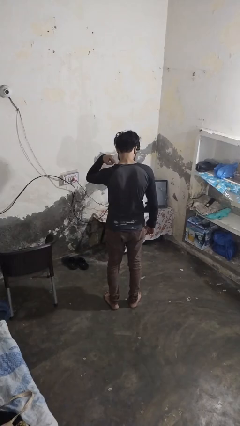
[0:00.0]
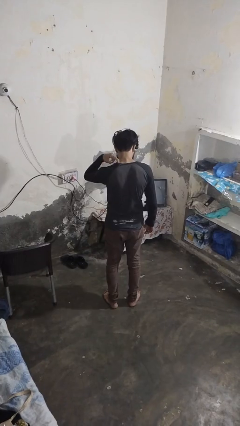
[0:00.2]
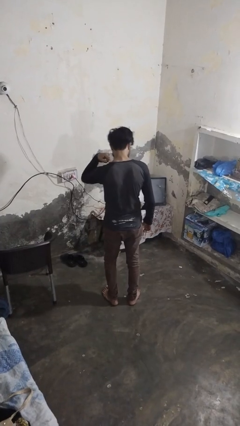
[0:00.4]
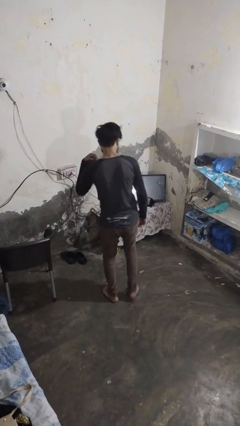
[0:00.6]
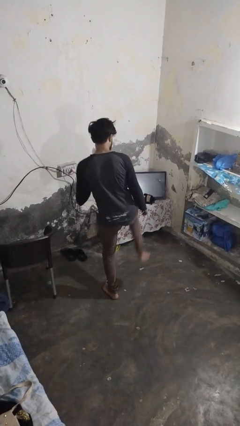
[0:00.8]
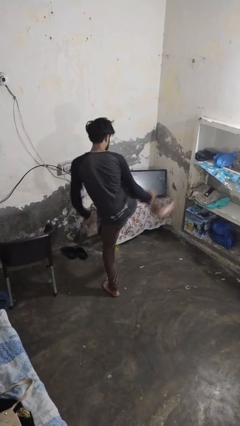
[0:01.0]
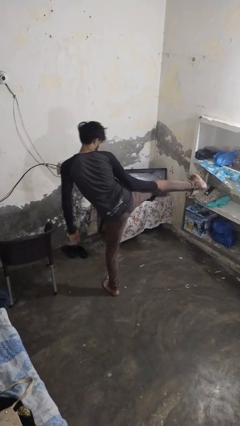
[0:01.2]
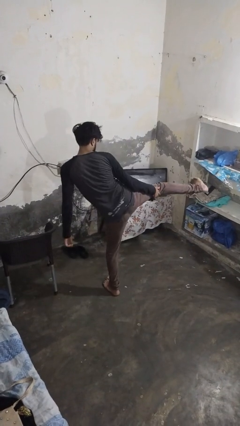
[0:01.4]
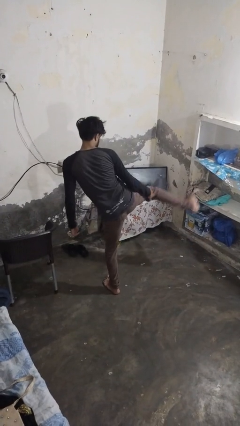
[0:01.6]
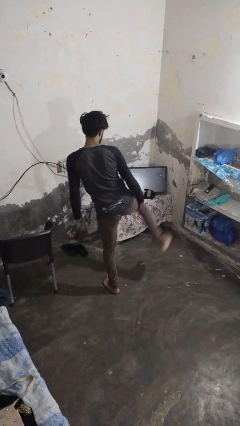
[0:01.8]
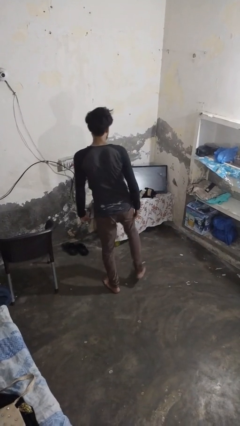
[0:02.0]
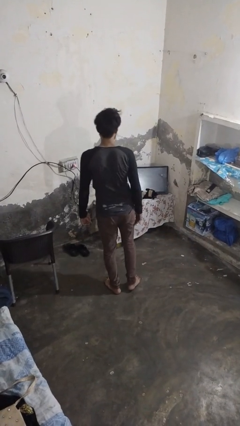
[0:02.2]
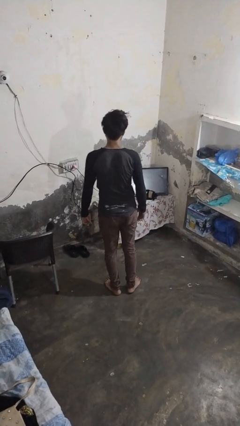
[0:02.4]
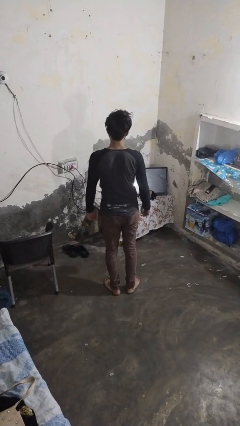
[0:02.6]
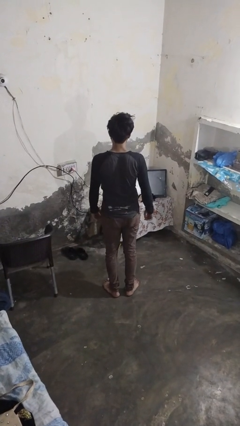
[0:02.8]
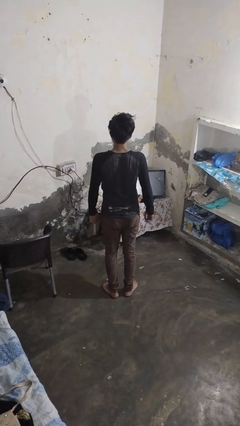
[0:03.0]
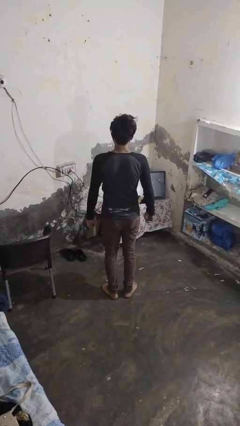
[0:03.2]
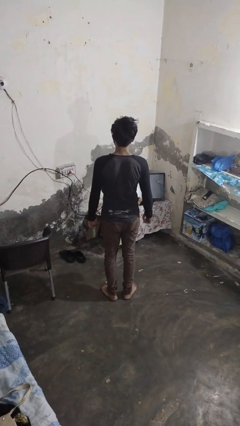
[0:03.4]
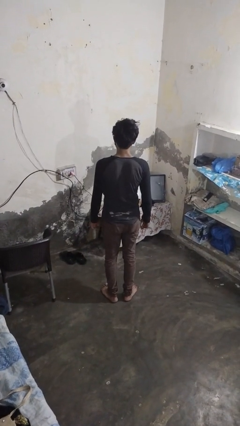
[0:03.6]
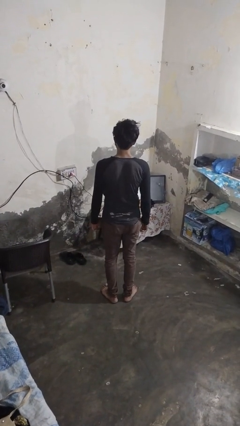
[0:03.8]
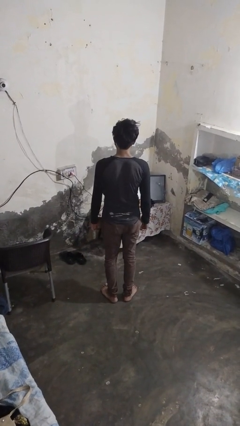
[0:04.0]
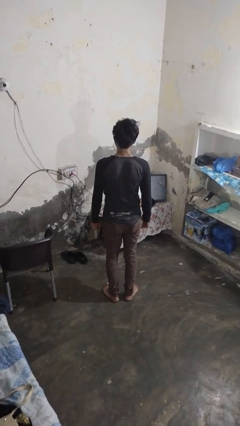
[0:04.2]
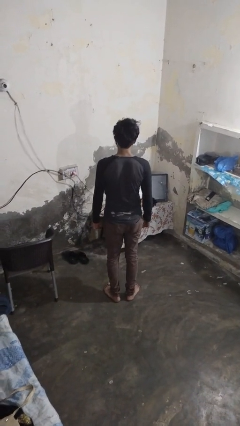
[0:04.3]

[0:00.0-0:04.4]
person karate kicks

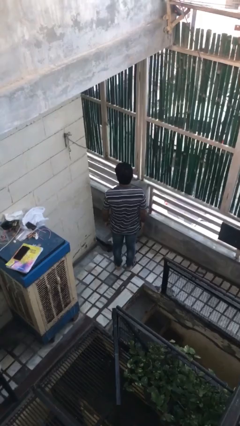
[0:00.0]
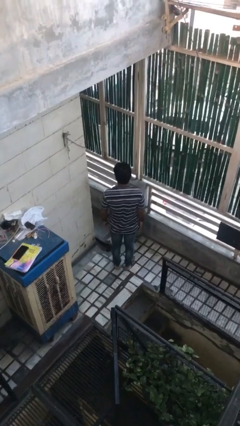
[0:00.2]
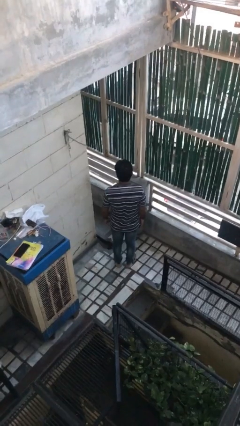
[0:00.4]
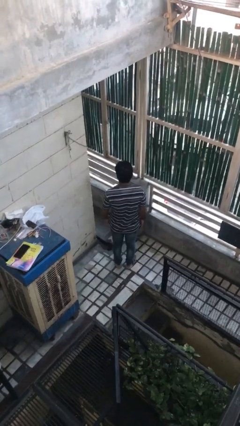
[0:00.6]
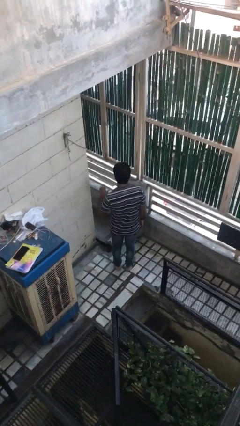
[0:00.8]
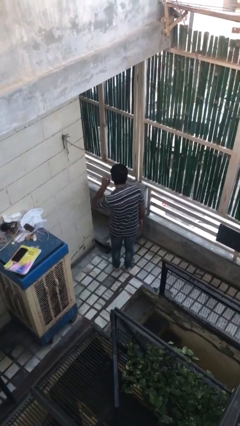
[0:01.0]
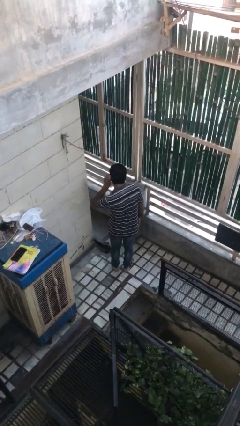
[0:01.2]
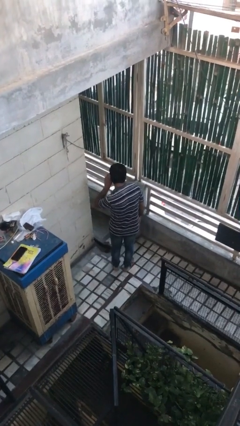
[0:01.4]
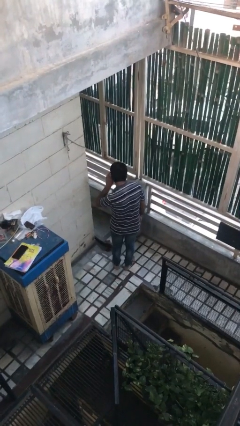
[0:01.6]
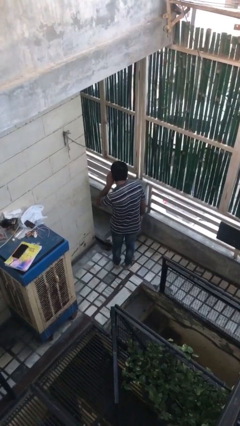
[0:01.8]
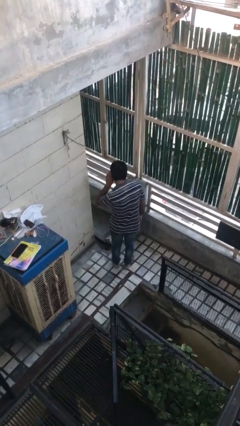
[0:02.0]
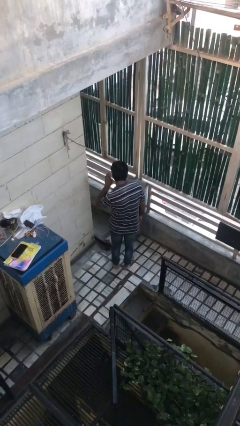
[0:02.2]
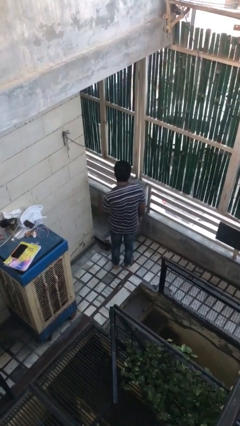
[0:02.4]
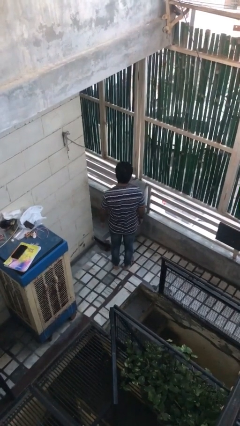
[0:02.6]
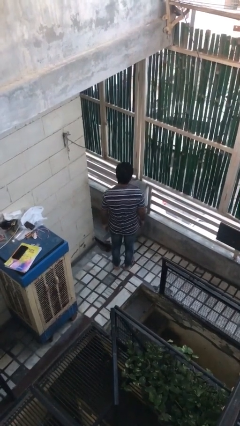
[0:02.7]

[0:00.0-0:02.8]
person gestures listen closely

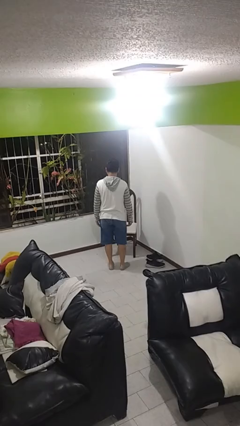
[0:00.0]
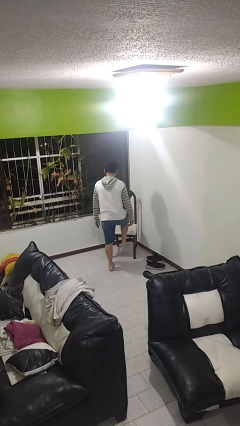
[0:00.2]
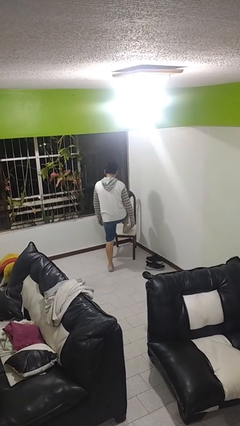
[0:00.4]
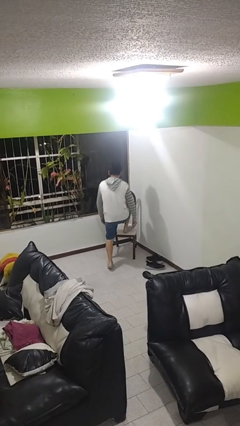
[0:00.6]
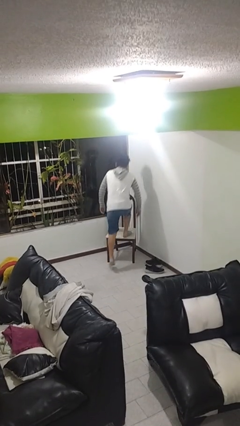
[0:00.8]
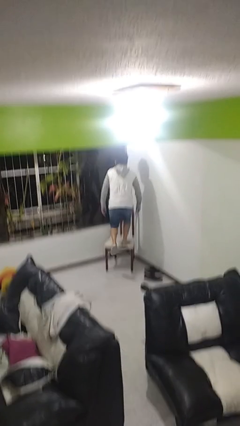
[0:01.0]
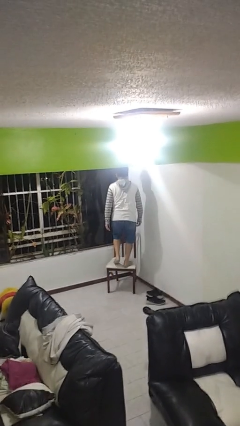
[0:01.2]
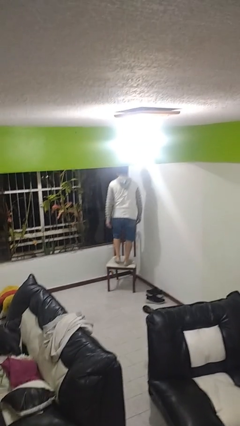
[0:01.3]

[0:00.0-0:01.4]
person climbs on chair

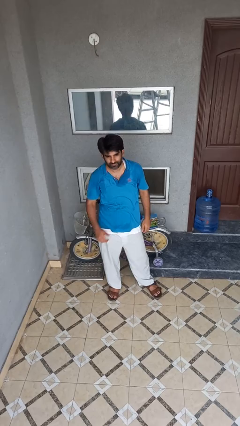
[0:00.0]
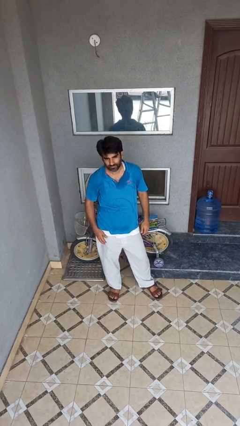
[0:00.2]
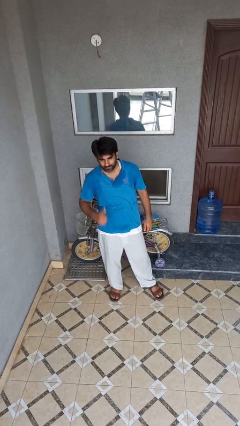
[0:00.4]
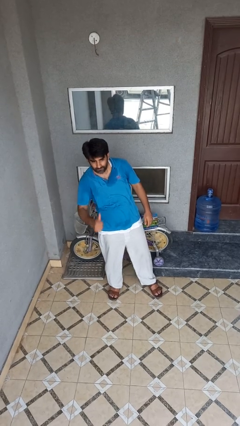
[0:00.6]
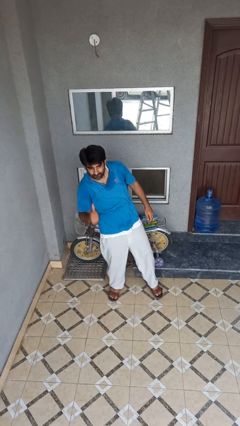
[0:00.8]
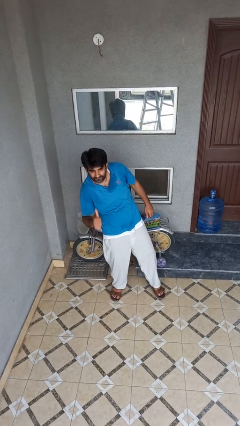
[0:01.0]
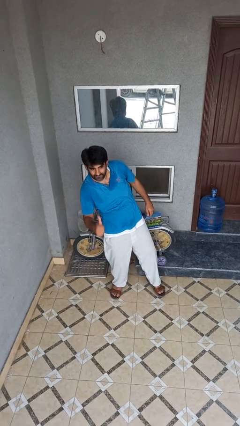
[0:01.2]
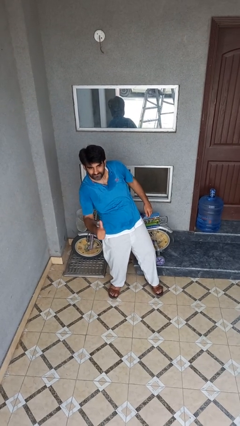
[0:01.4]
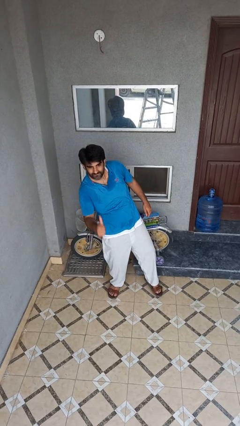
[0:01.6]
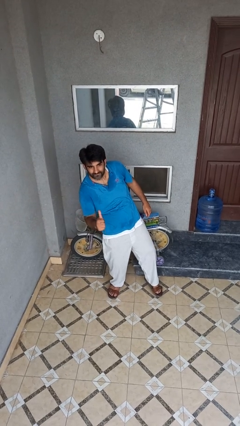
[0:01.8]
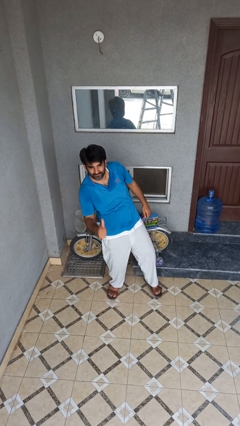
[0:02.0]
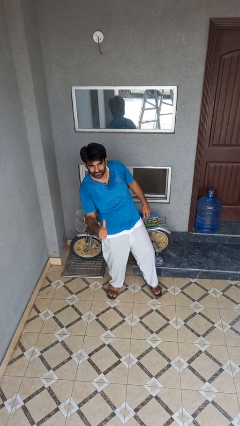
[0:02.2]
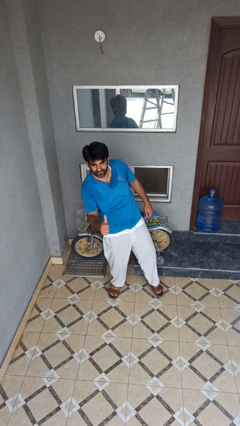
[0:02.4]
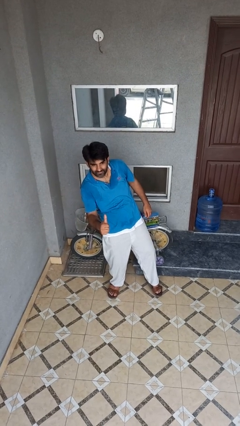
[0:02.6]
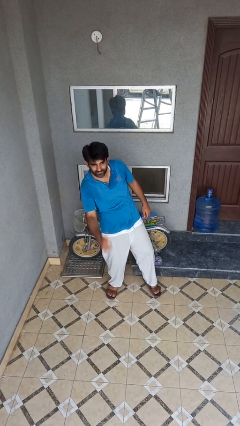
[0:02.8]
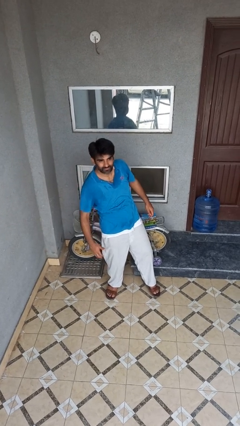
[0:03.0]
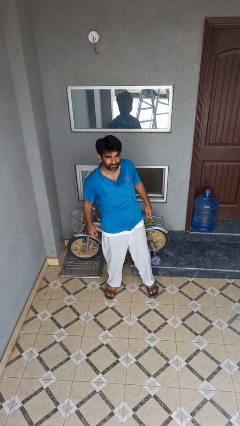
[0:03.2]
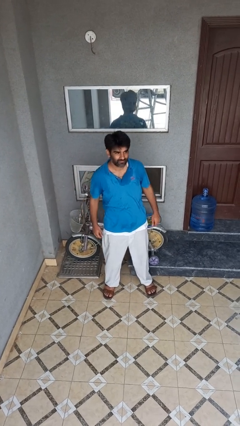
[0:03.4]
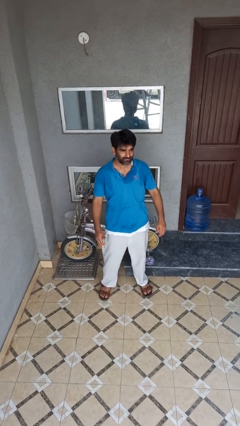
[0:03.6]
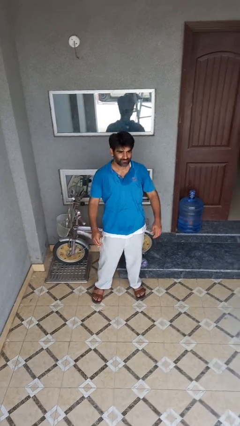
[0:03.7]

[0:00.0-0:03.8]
person gestures thumbs up

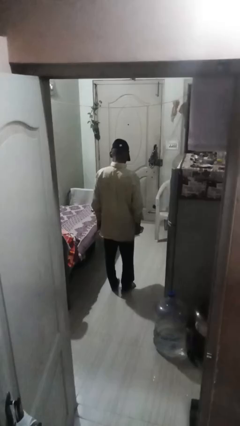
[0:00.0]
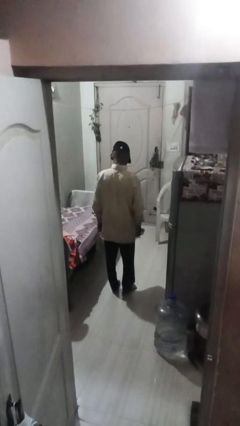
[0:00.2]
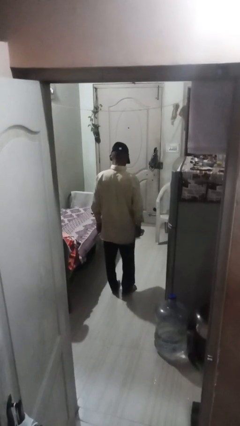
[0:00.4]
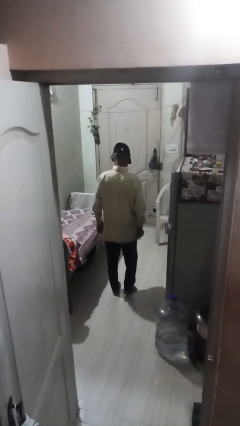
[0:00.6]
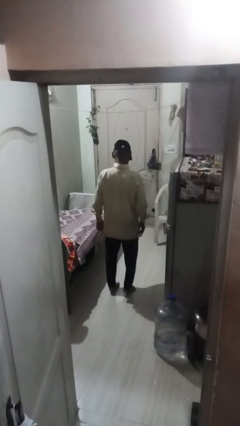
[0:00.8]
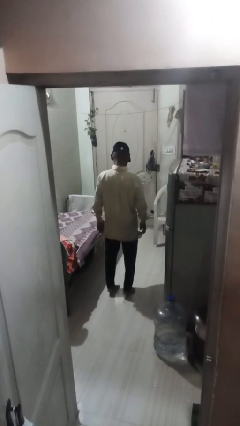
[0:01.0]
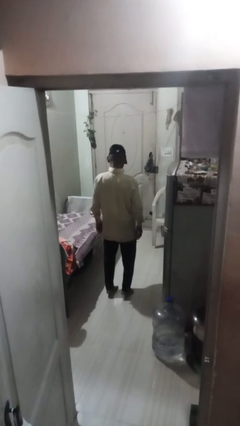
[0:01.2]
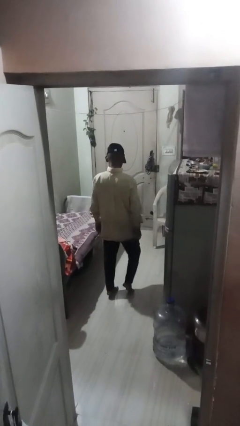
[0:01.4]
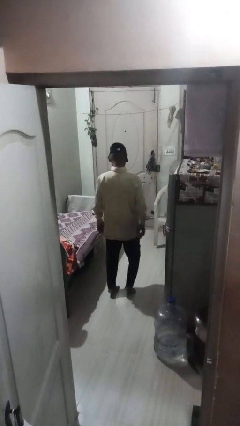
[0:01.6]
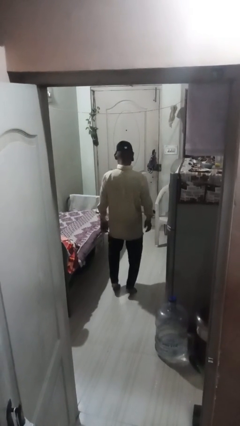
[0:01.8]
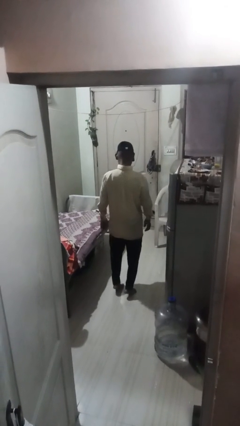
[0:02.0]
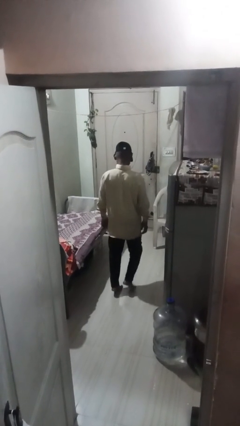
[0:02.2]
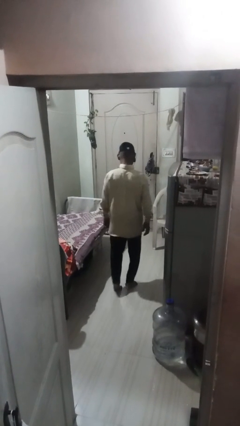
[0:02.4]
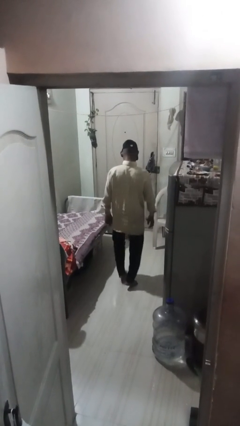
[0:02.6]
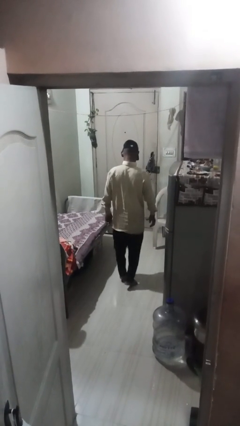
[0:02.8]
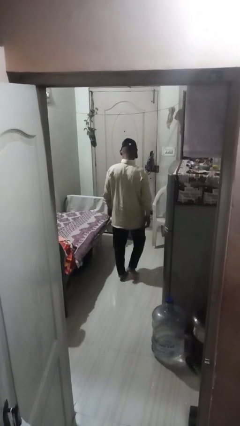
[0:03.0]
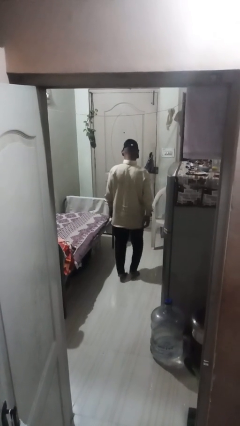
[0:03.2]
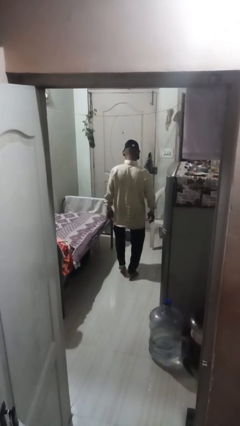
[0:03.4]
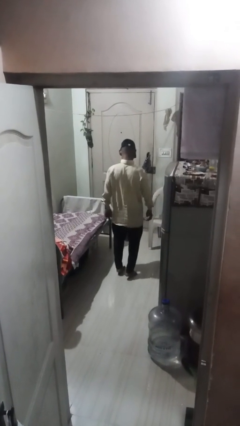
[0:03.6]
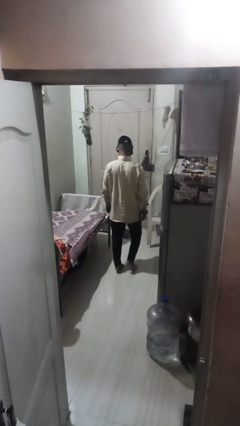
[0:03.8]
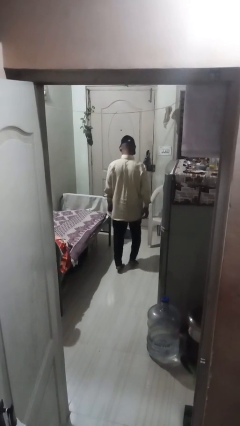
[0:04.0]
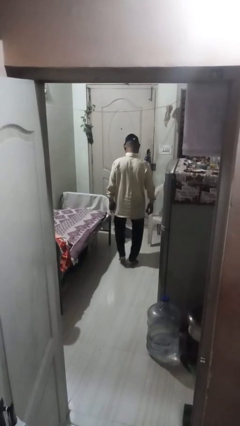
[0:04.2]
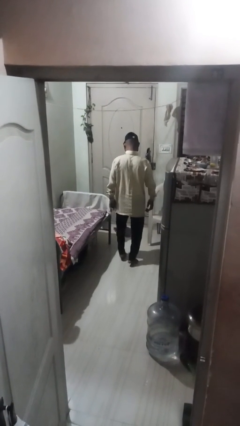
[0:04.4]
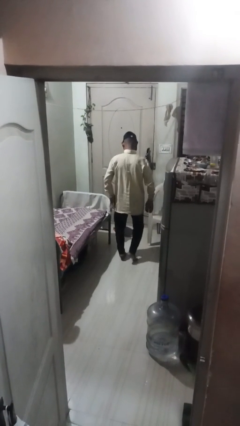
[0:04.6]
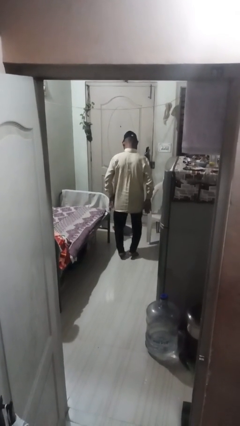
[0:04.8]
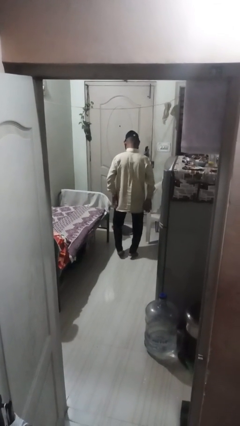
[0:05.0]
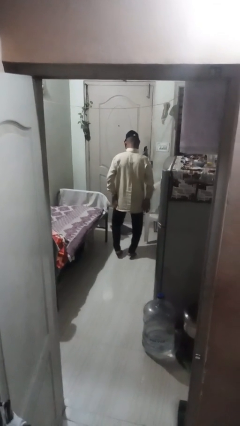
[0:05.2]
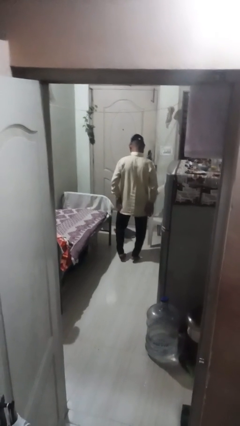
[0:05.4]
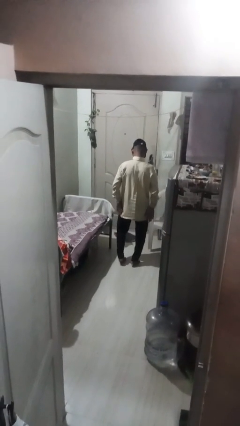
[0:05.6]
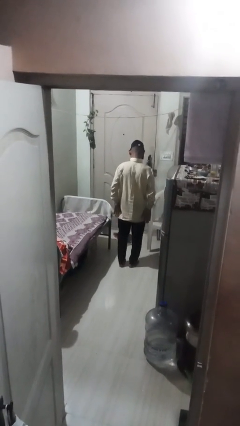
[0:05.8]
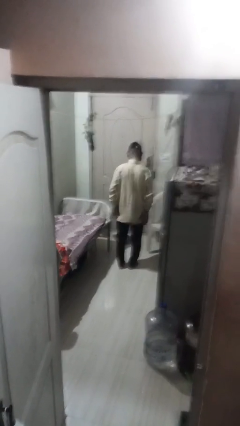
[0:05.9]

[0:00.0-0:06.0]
person walks tiptoe
